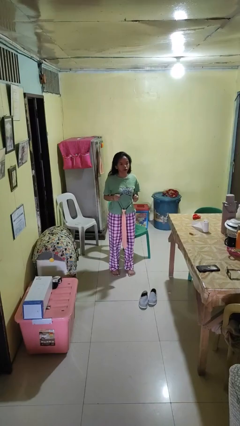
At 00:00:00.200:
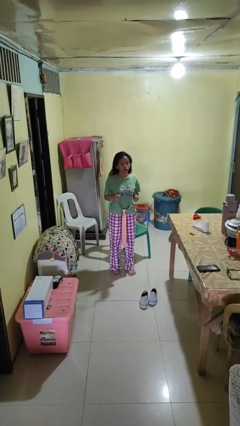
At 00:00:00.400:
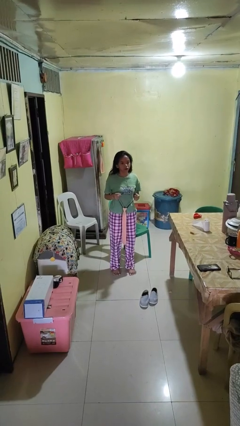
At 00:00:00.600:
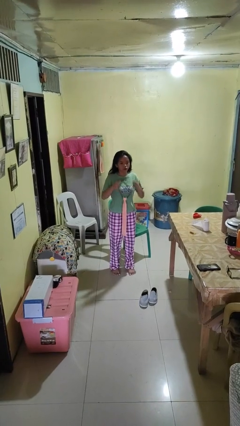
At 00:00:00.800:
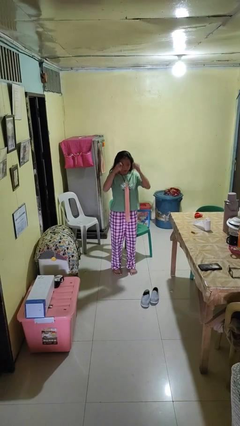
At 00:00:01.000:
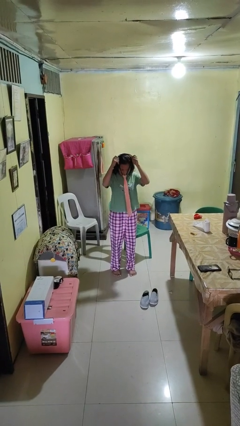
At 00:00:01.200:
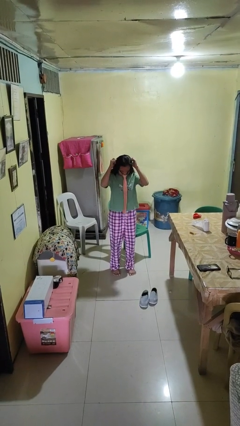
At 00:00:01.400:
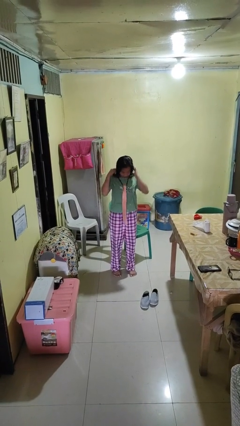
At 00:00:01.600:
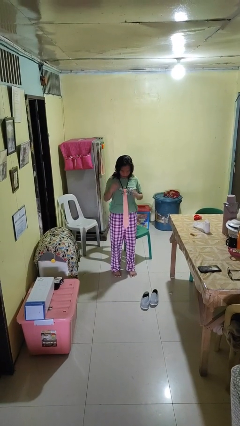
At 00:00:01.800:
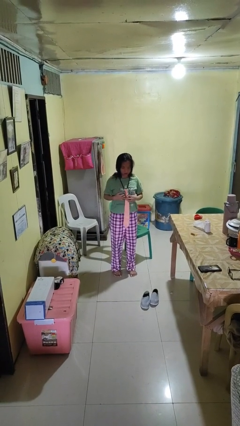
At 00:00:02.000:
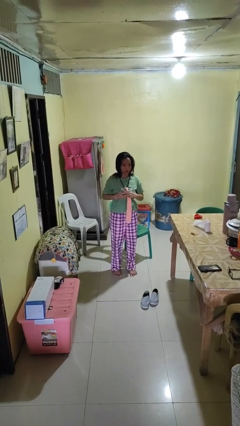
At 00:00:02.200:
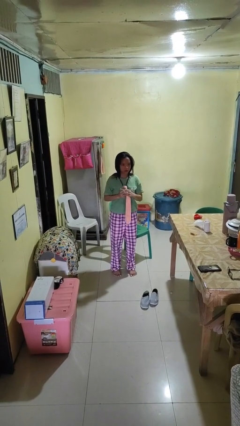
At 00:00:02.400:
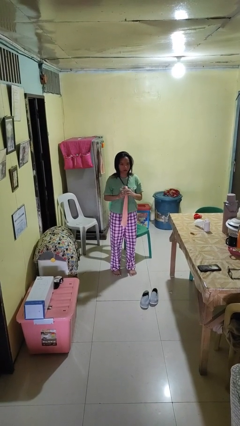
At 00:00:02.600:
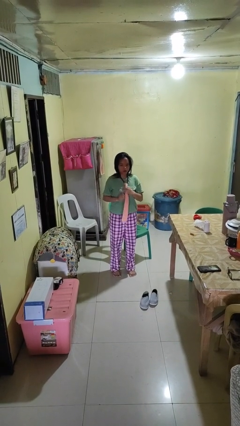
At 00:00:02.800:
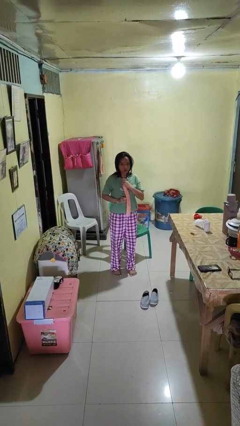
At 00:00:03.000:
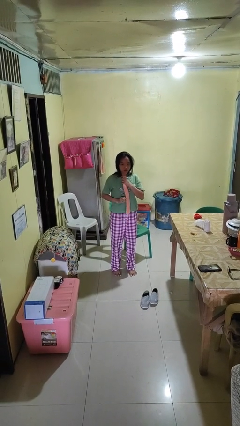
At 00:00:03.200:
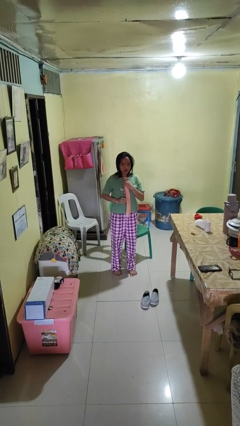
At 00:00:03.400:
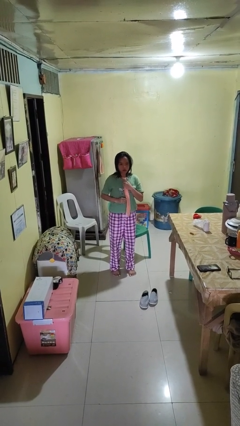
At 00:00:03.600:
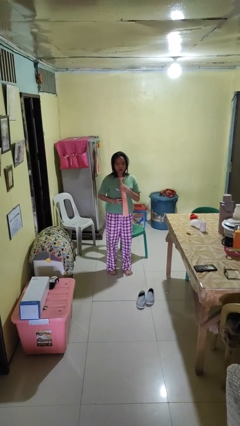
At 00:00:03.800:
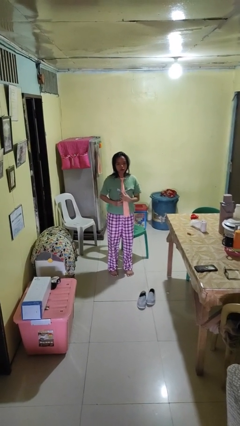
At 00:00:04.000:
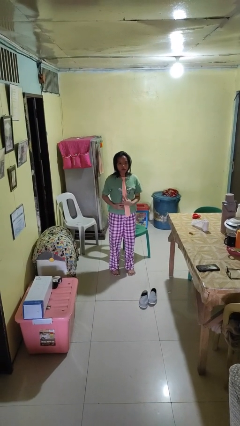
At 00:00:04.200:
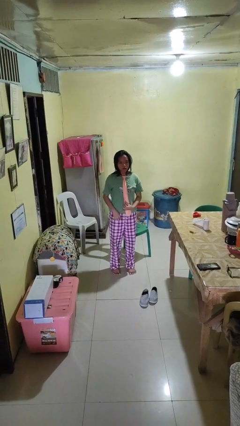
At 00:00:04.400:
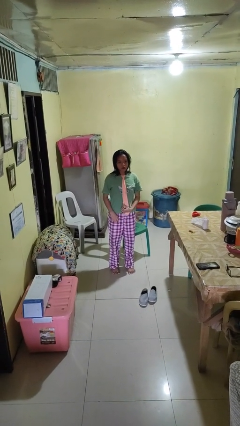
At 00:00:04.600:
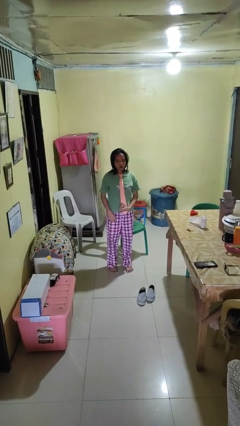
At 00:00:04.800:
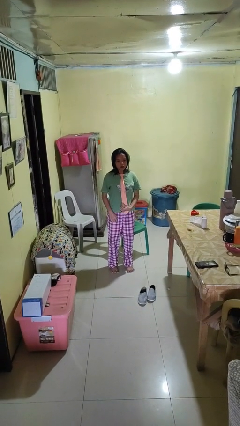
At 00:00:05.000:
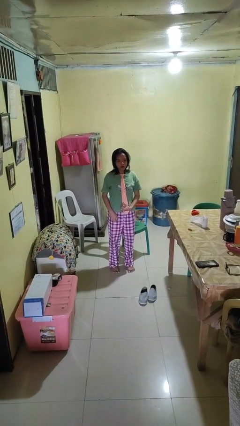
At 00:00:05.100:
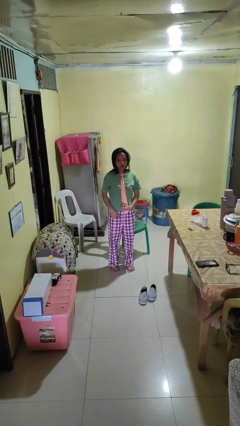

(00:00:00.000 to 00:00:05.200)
person puts on necktie

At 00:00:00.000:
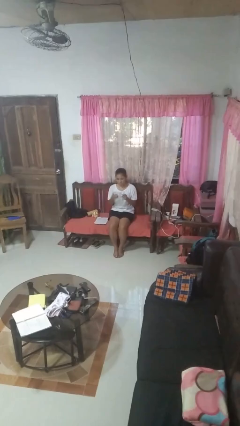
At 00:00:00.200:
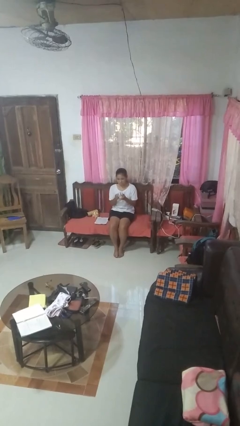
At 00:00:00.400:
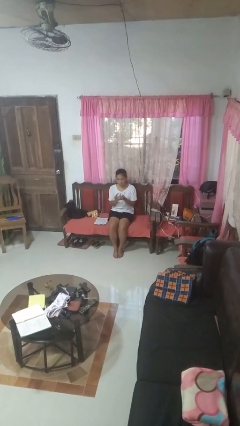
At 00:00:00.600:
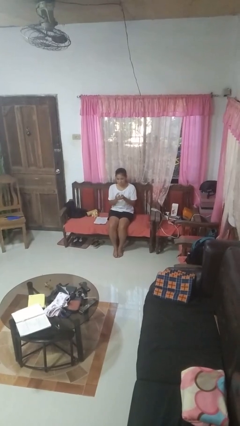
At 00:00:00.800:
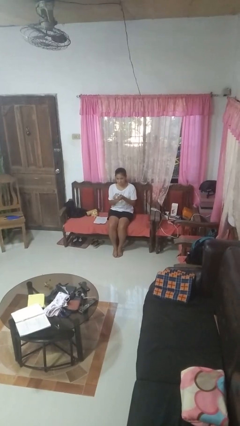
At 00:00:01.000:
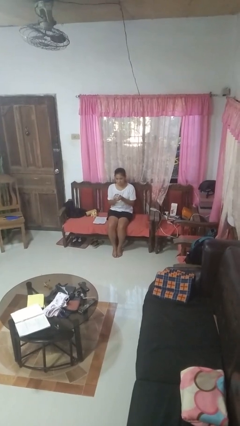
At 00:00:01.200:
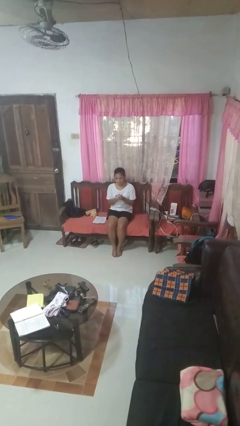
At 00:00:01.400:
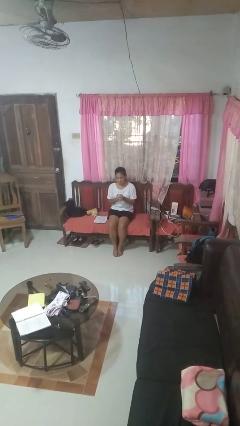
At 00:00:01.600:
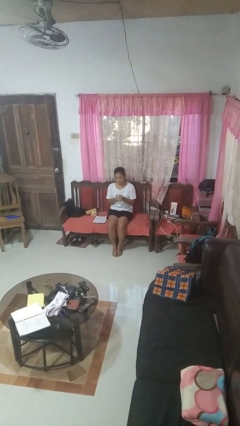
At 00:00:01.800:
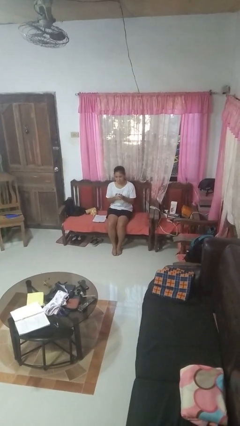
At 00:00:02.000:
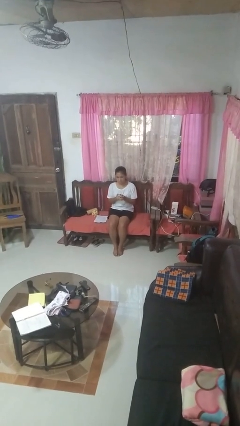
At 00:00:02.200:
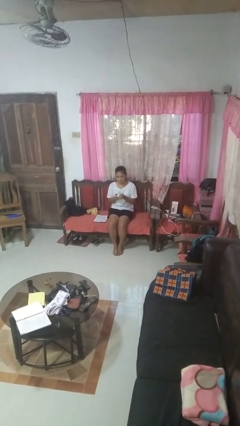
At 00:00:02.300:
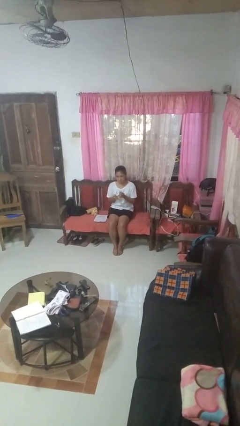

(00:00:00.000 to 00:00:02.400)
person crumples paper

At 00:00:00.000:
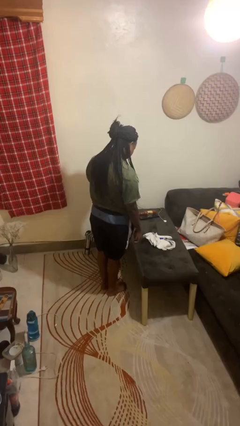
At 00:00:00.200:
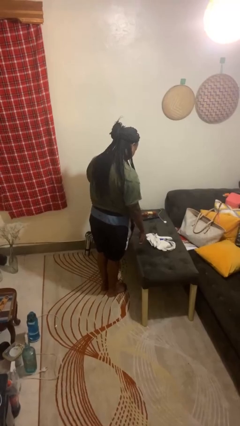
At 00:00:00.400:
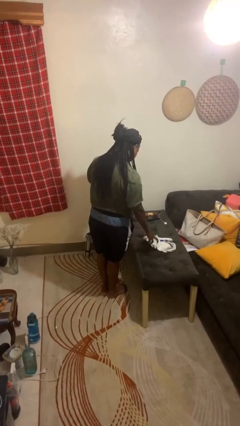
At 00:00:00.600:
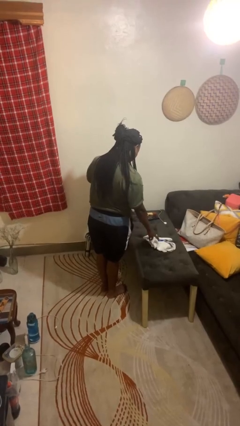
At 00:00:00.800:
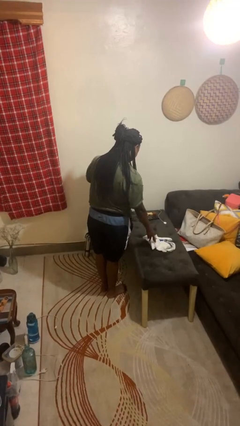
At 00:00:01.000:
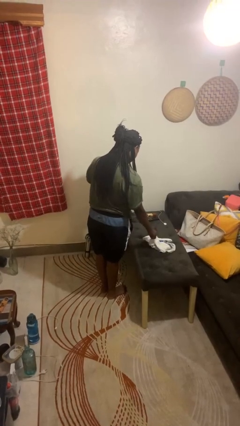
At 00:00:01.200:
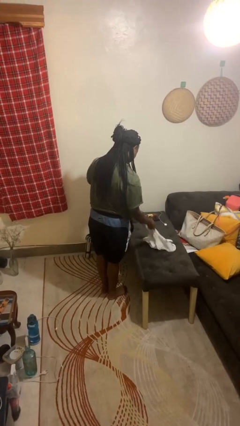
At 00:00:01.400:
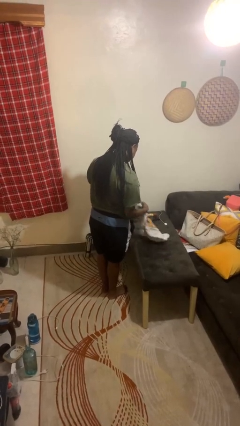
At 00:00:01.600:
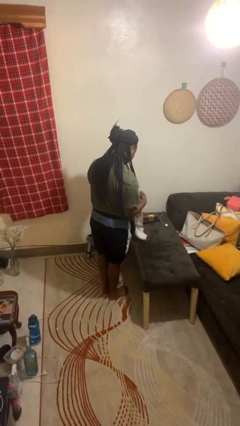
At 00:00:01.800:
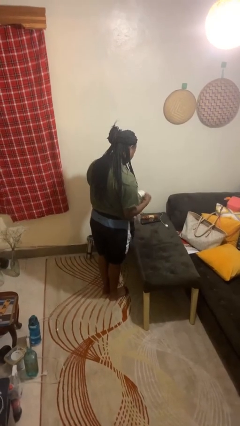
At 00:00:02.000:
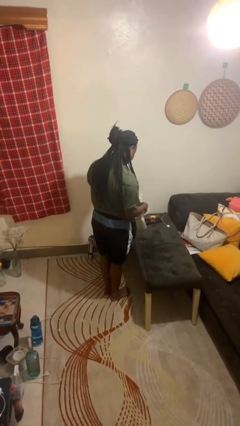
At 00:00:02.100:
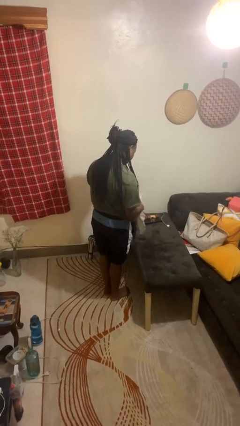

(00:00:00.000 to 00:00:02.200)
person picks up object from table

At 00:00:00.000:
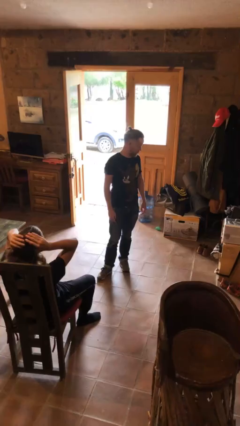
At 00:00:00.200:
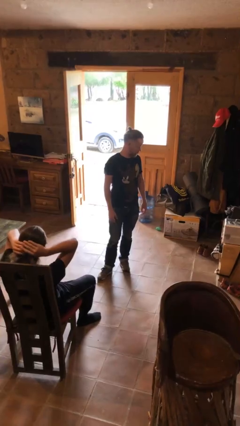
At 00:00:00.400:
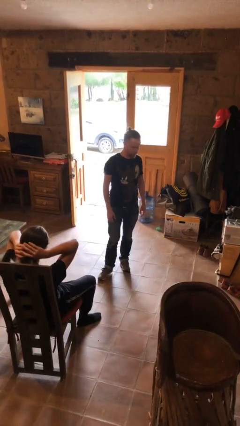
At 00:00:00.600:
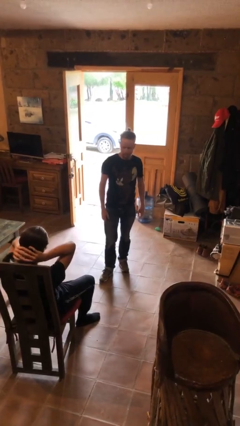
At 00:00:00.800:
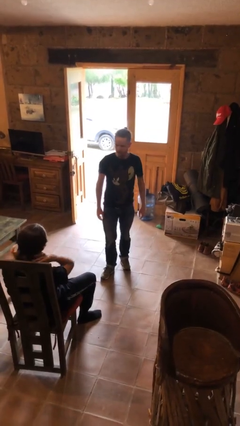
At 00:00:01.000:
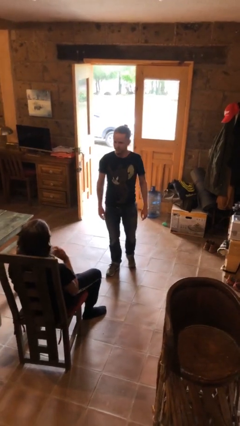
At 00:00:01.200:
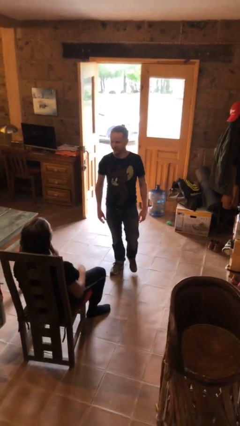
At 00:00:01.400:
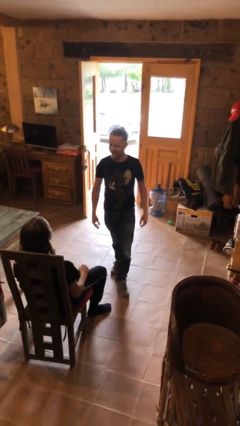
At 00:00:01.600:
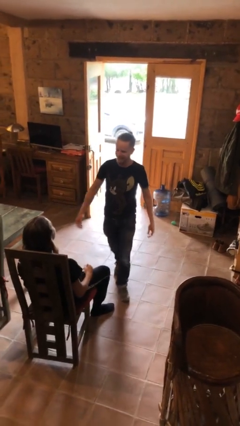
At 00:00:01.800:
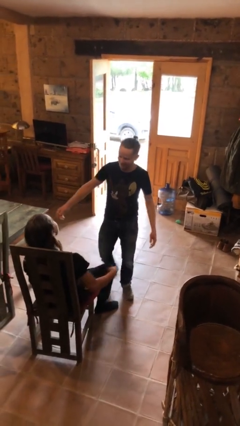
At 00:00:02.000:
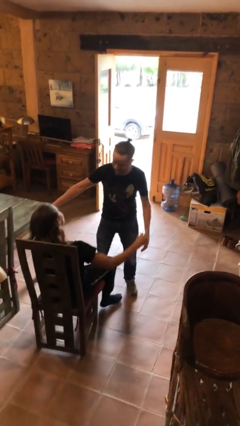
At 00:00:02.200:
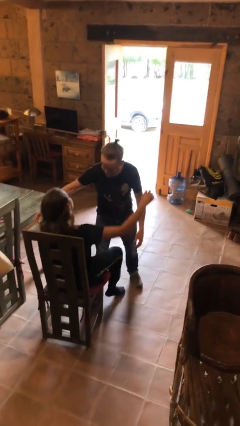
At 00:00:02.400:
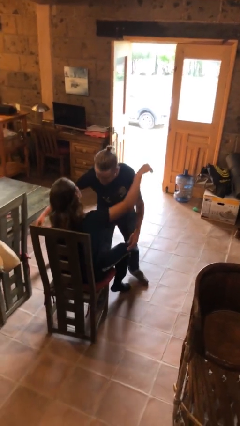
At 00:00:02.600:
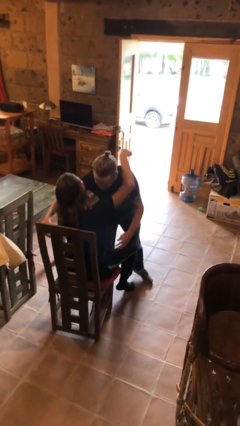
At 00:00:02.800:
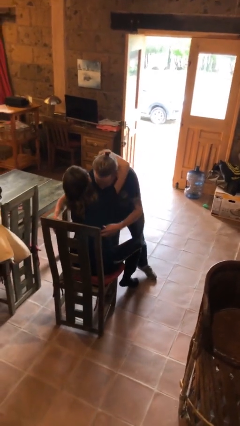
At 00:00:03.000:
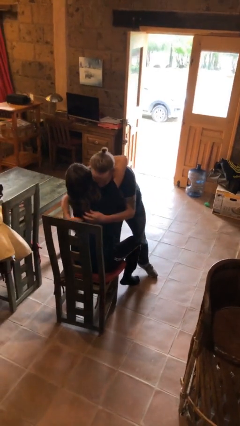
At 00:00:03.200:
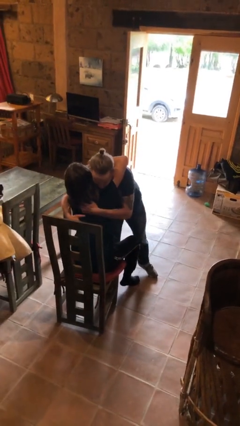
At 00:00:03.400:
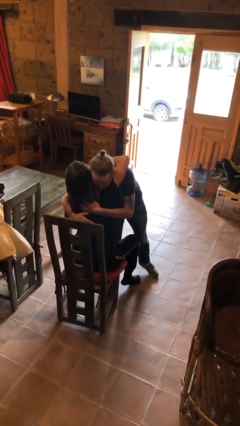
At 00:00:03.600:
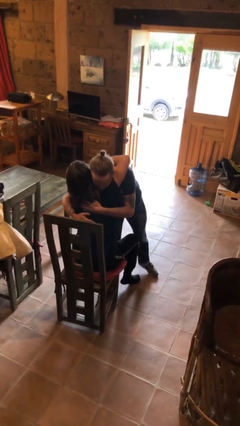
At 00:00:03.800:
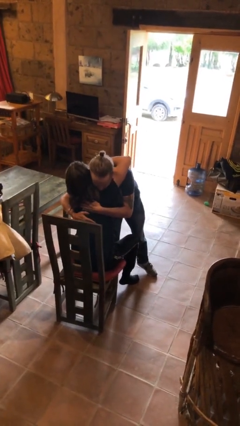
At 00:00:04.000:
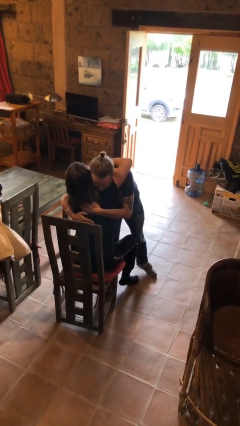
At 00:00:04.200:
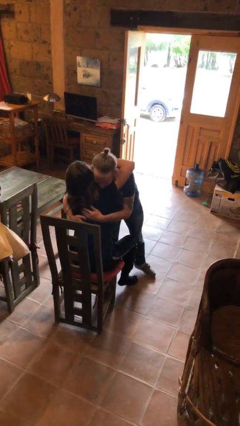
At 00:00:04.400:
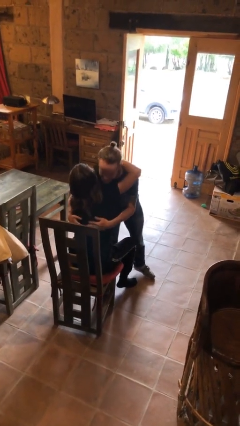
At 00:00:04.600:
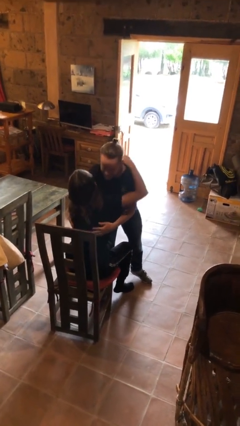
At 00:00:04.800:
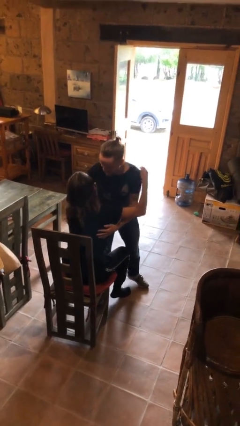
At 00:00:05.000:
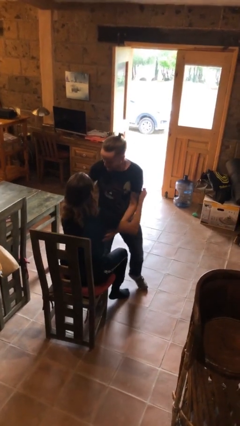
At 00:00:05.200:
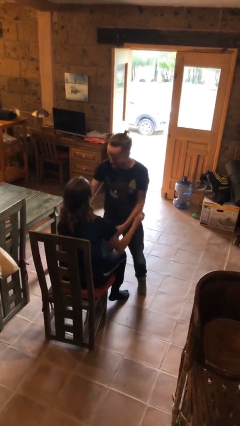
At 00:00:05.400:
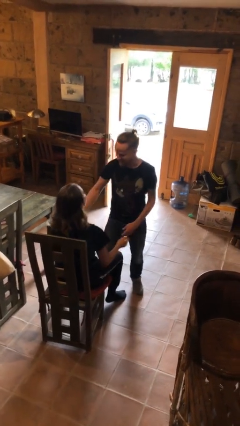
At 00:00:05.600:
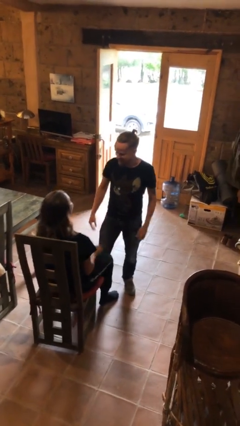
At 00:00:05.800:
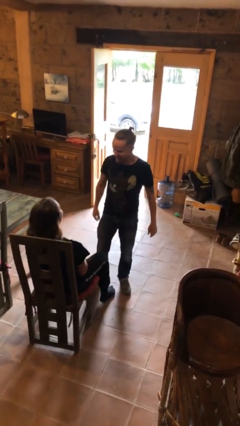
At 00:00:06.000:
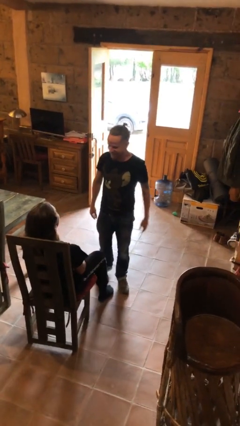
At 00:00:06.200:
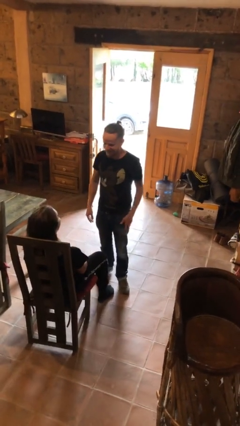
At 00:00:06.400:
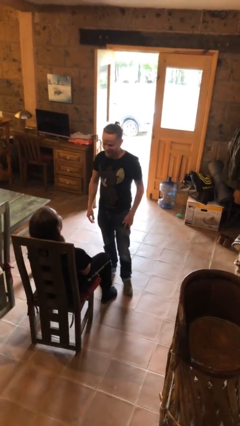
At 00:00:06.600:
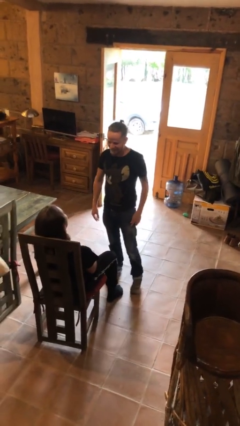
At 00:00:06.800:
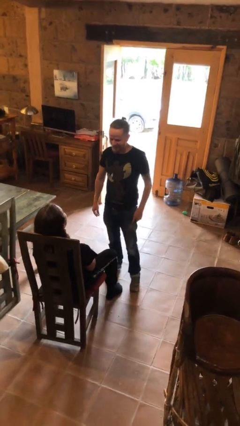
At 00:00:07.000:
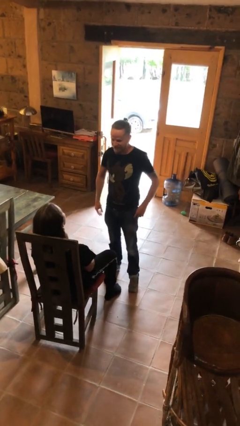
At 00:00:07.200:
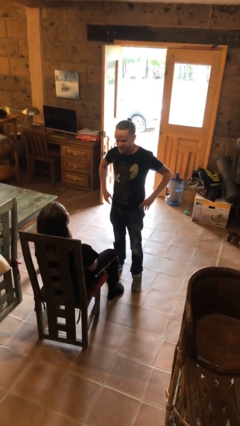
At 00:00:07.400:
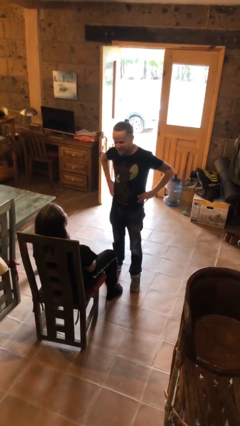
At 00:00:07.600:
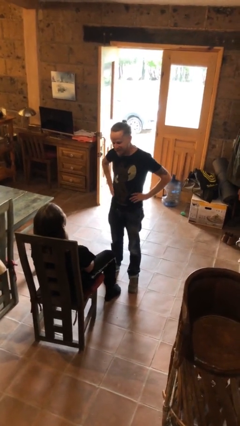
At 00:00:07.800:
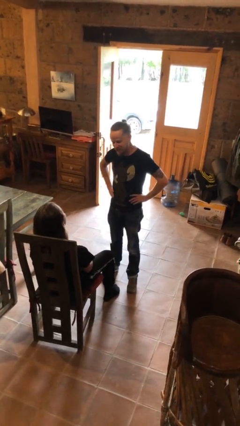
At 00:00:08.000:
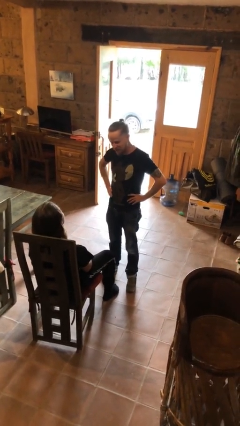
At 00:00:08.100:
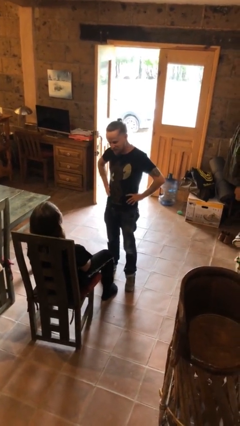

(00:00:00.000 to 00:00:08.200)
person embraces person
